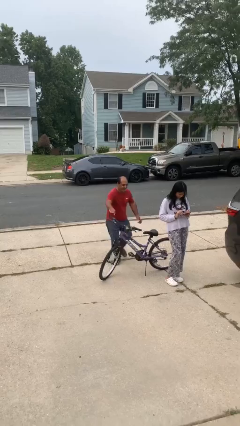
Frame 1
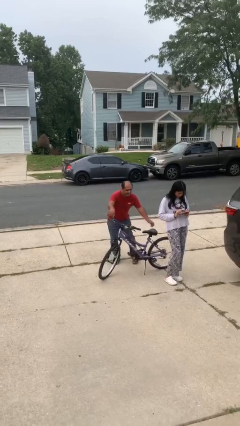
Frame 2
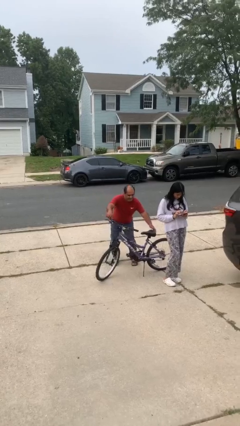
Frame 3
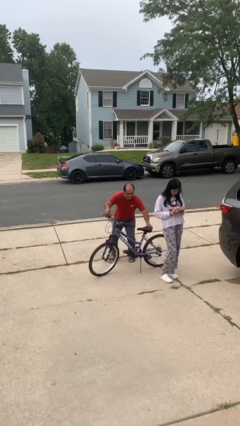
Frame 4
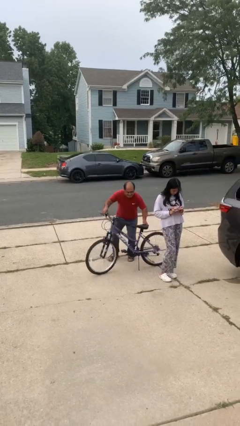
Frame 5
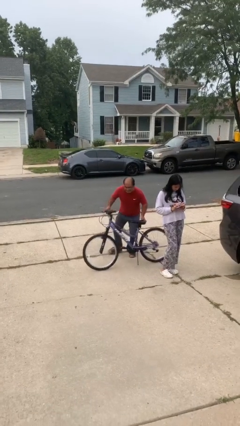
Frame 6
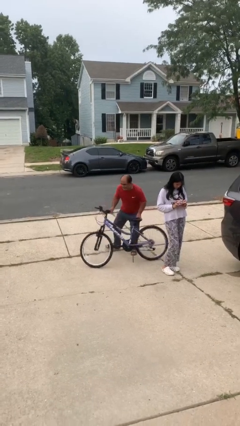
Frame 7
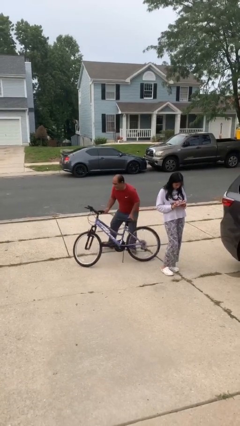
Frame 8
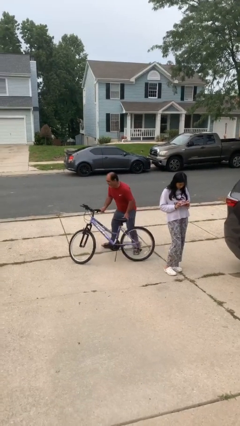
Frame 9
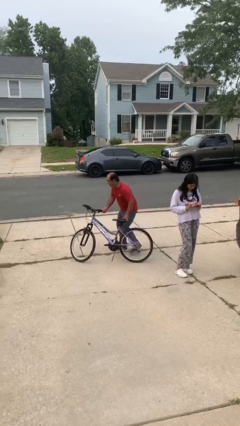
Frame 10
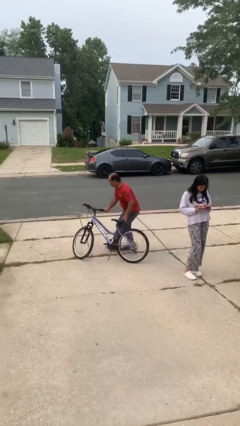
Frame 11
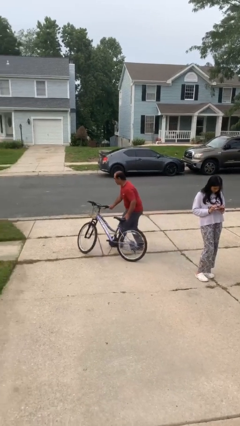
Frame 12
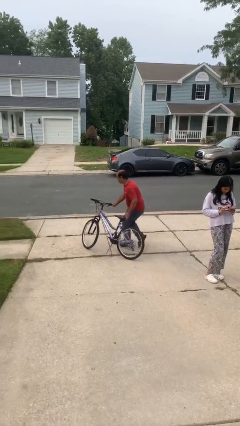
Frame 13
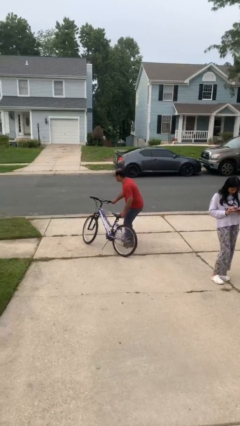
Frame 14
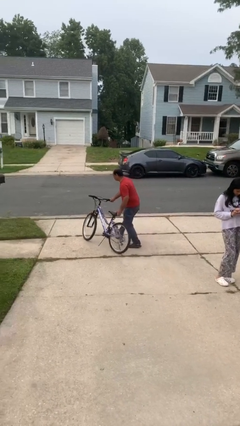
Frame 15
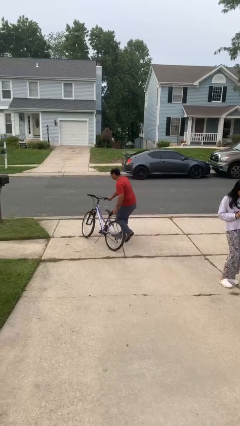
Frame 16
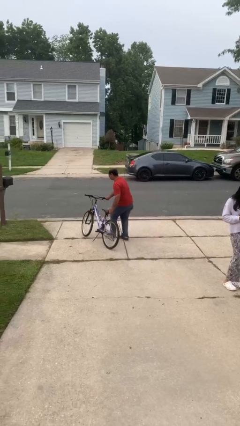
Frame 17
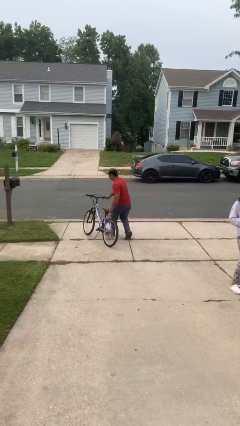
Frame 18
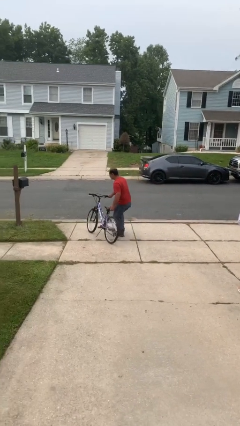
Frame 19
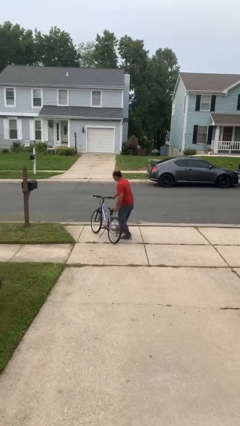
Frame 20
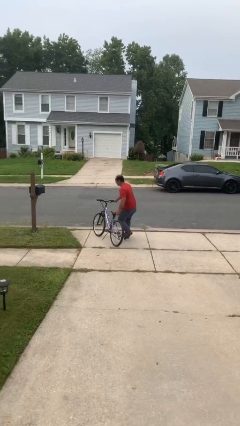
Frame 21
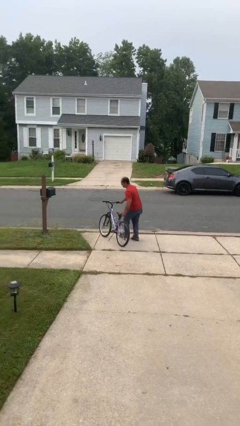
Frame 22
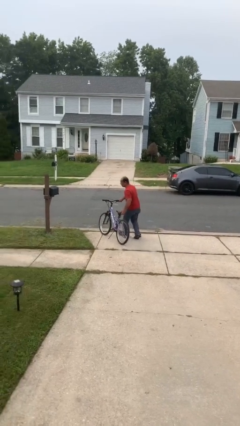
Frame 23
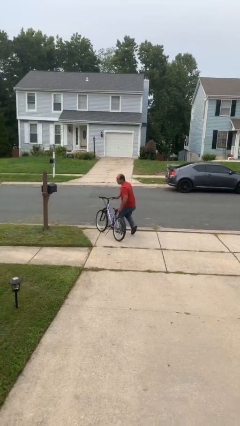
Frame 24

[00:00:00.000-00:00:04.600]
person steals object from person

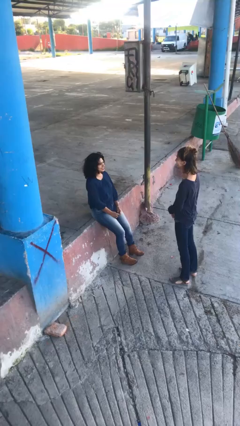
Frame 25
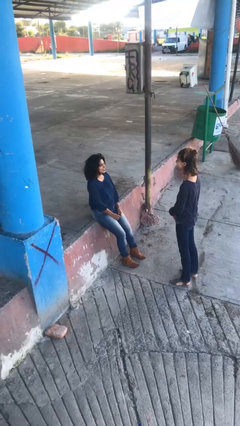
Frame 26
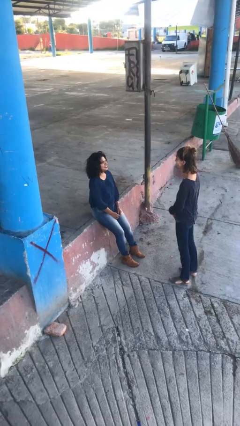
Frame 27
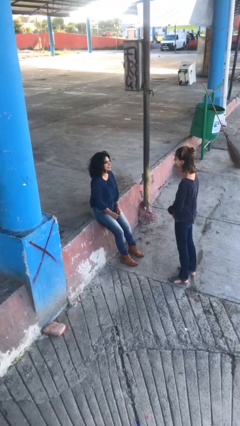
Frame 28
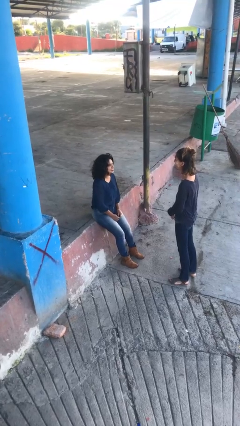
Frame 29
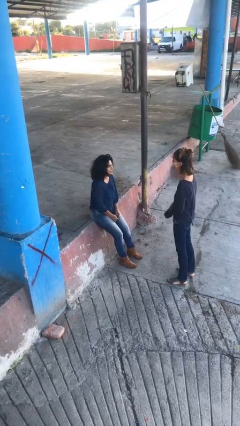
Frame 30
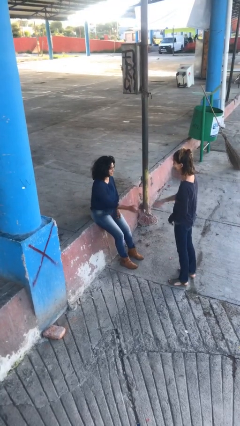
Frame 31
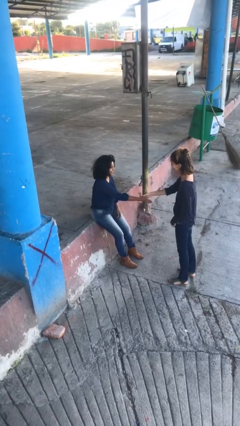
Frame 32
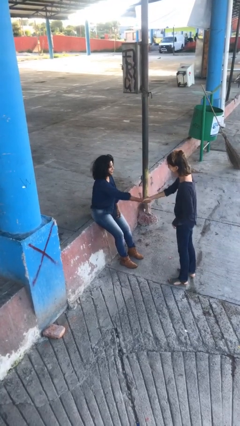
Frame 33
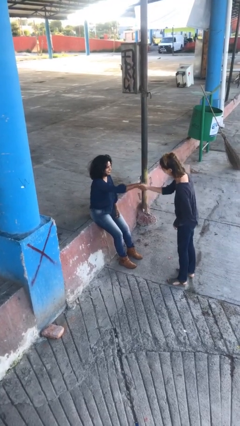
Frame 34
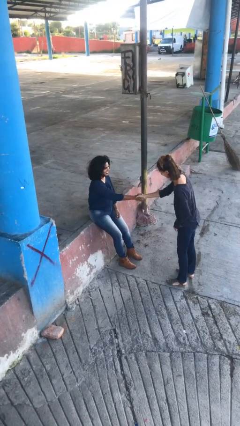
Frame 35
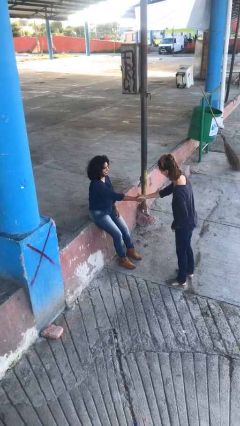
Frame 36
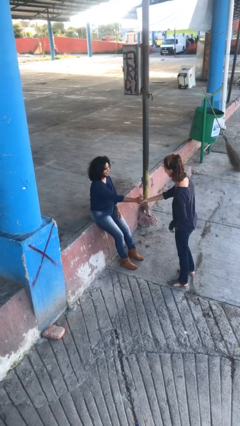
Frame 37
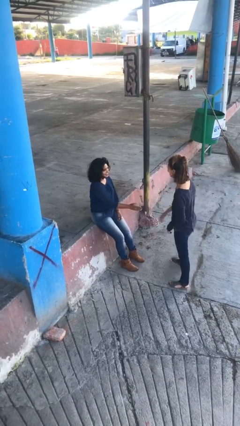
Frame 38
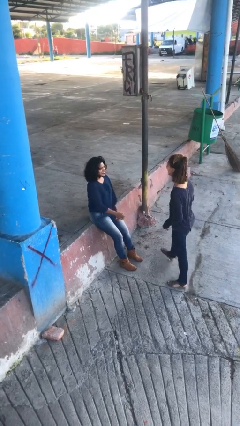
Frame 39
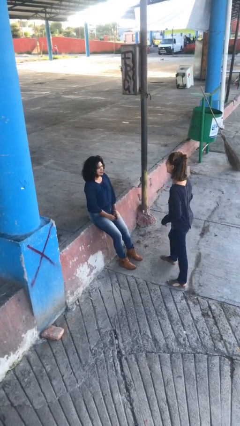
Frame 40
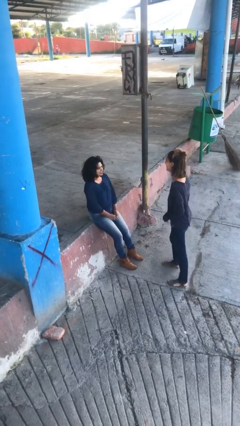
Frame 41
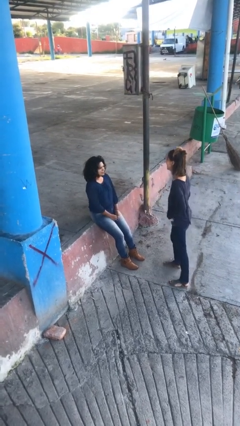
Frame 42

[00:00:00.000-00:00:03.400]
person shakes hand

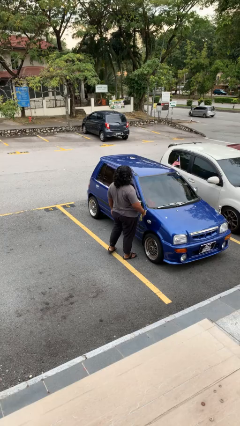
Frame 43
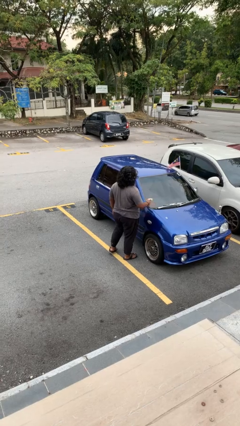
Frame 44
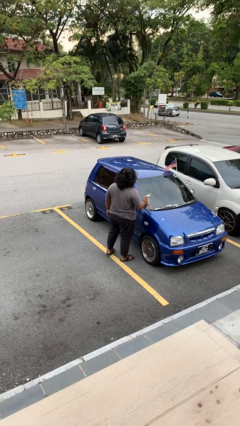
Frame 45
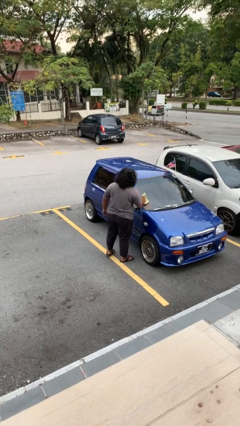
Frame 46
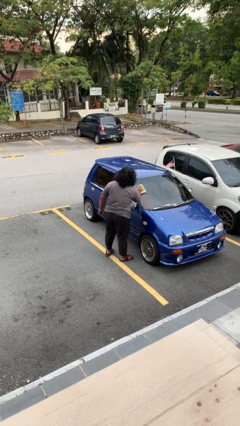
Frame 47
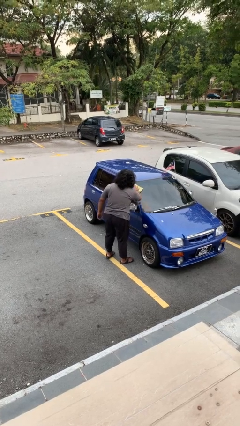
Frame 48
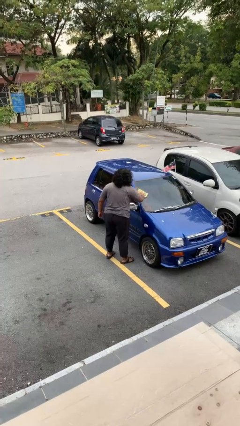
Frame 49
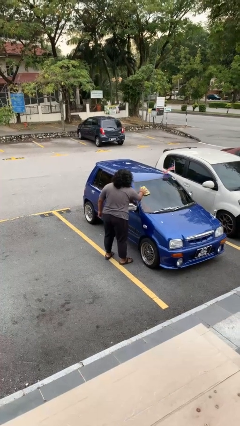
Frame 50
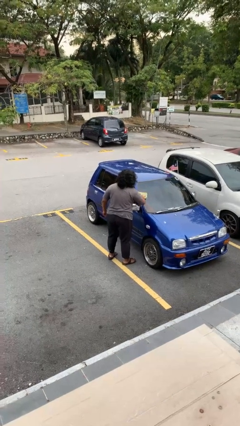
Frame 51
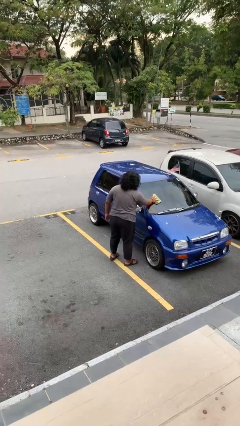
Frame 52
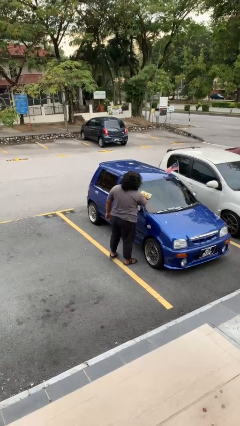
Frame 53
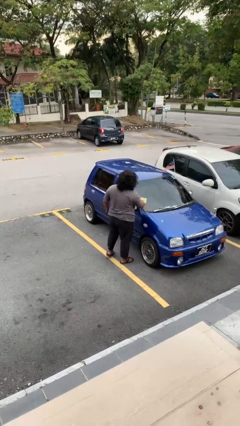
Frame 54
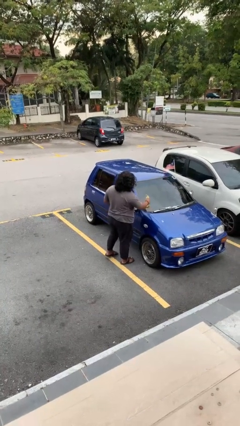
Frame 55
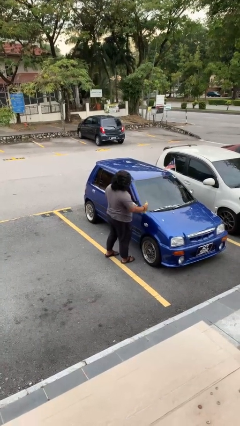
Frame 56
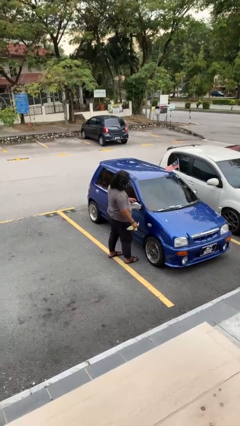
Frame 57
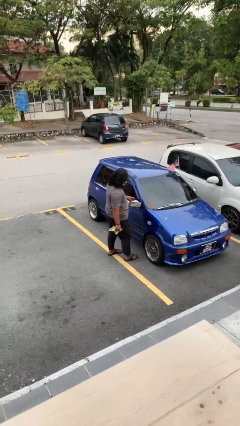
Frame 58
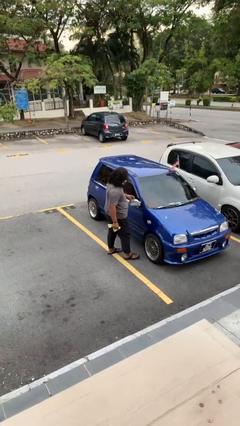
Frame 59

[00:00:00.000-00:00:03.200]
person polishes car with rag

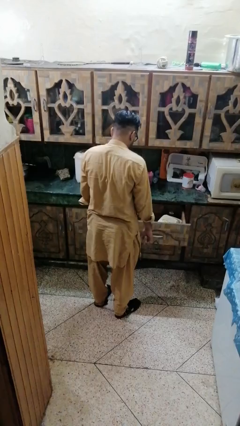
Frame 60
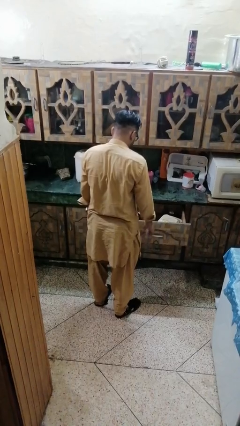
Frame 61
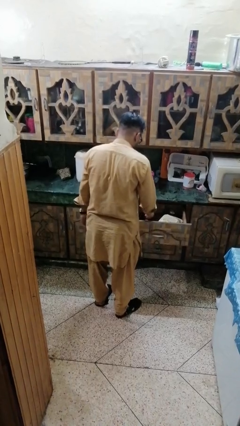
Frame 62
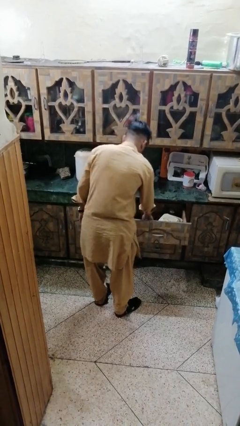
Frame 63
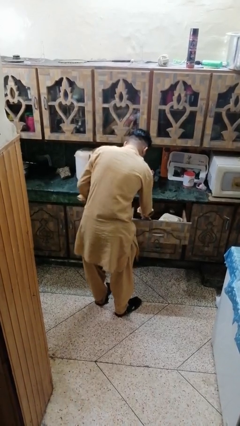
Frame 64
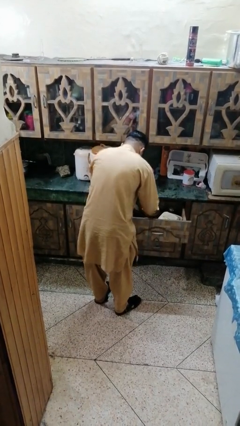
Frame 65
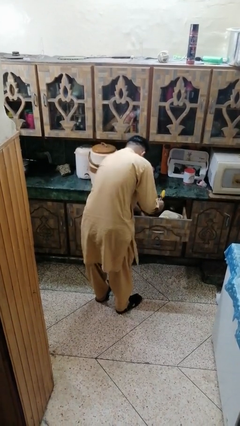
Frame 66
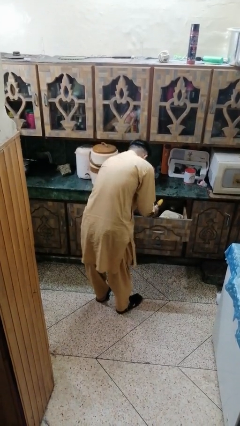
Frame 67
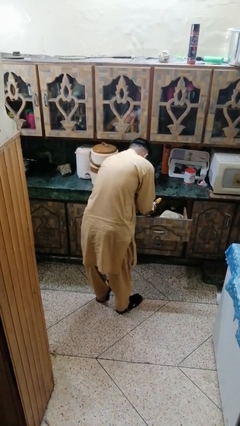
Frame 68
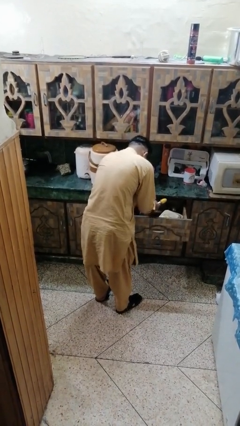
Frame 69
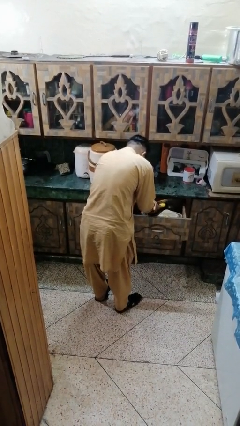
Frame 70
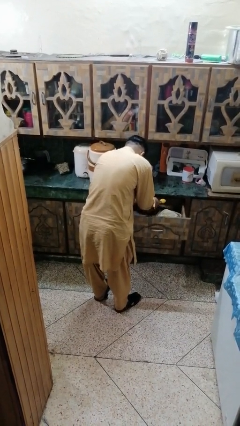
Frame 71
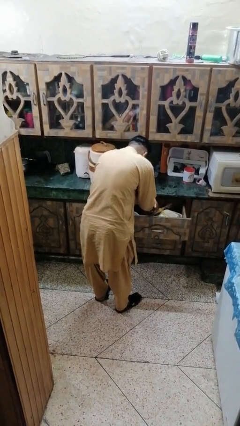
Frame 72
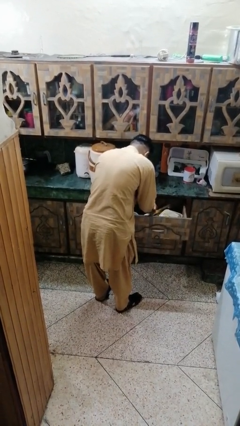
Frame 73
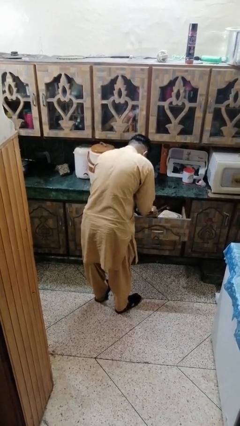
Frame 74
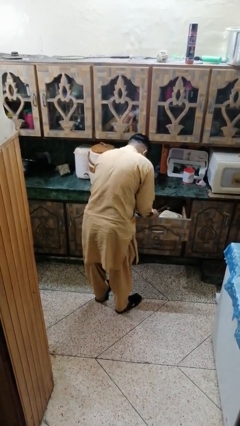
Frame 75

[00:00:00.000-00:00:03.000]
person searches in kitchen drawer

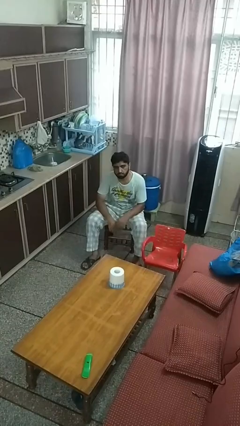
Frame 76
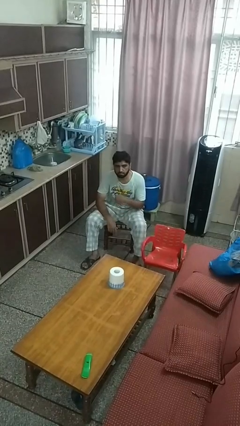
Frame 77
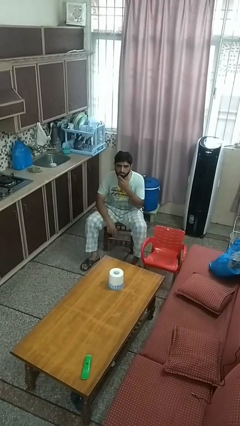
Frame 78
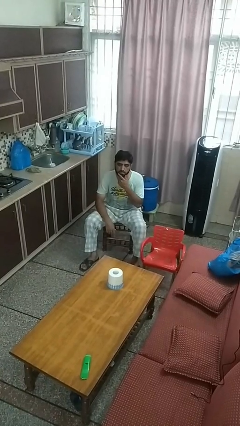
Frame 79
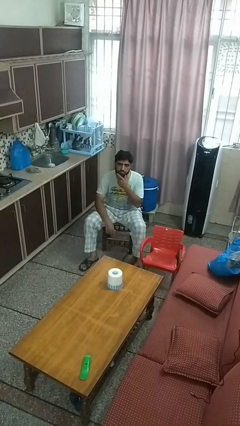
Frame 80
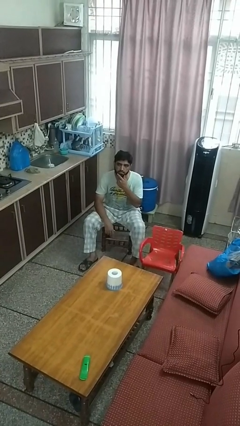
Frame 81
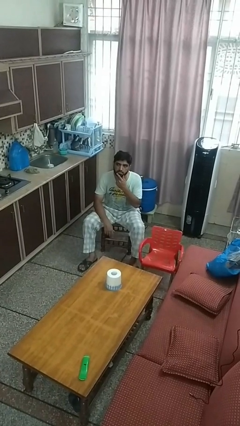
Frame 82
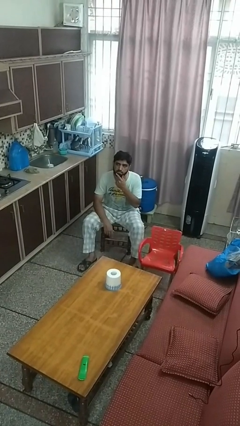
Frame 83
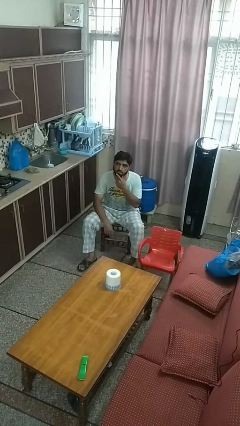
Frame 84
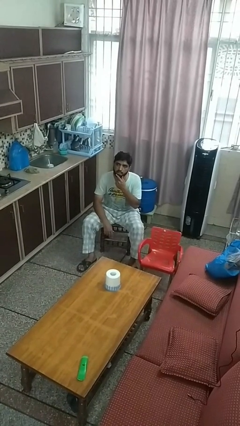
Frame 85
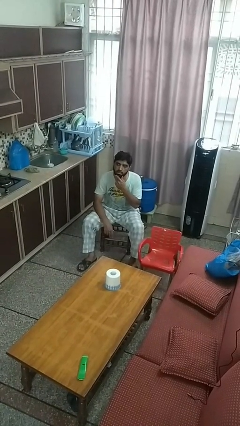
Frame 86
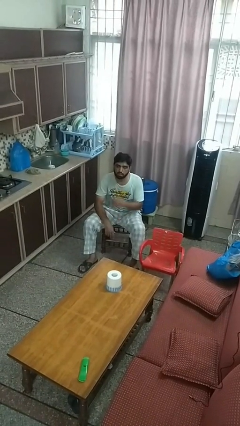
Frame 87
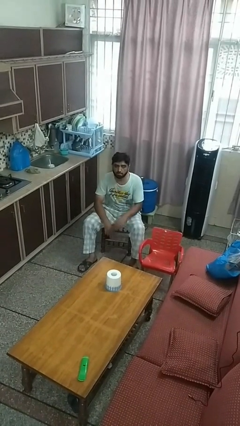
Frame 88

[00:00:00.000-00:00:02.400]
person strokes chin

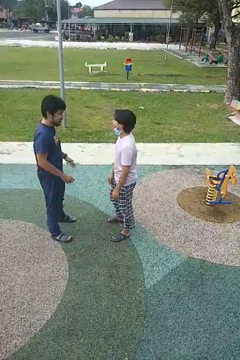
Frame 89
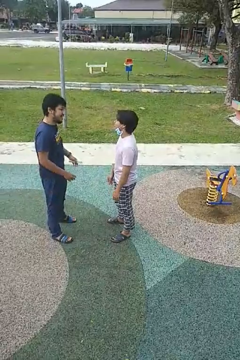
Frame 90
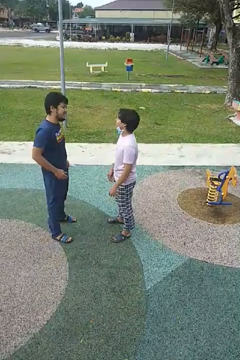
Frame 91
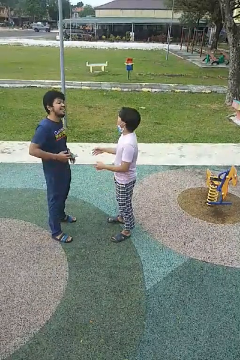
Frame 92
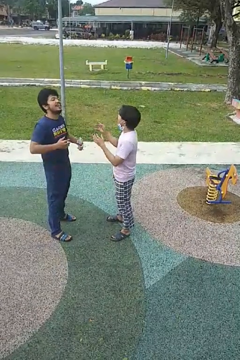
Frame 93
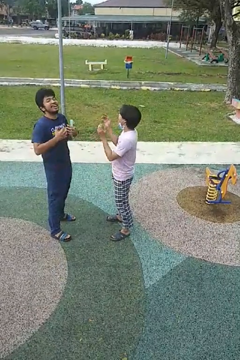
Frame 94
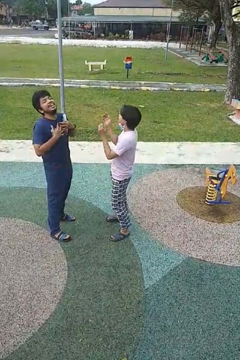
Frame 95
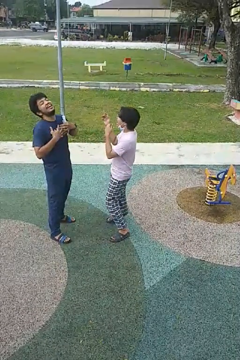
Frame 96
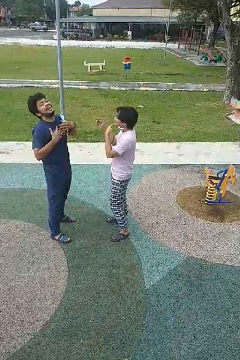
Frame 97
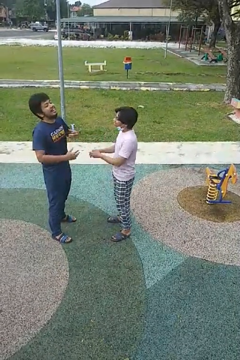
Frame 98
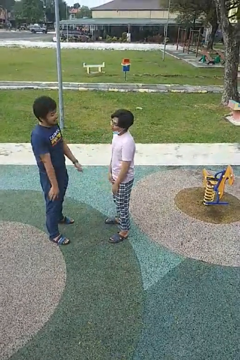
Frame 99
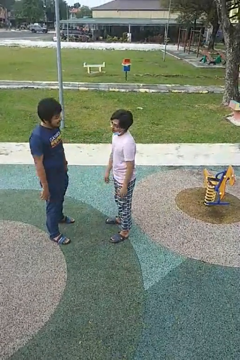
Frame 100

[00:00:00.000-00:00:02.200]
person laughs with person
